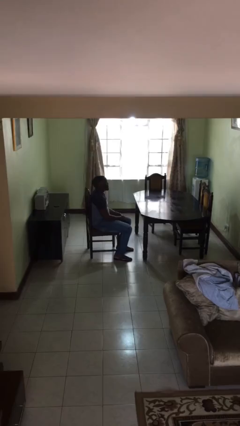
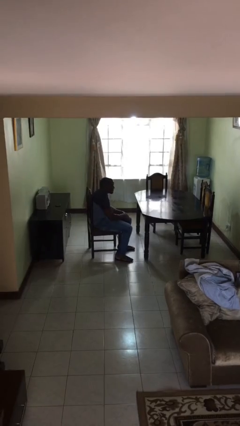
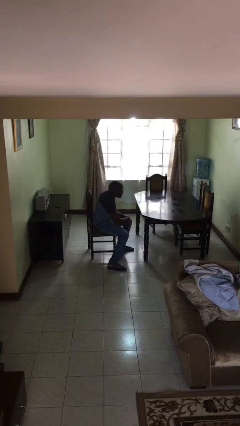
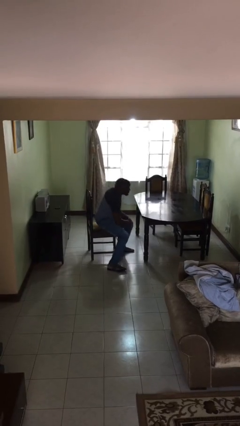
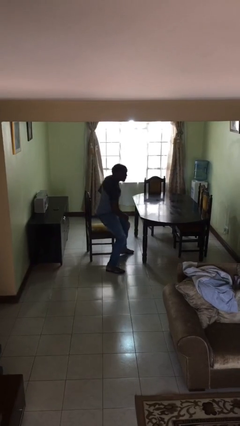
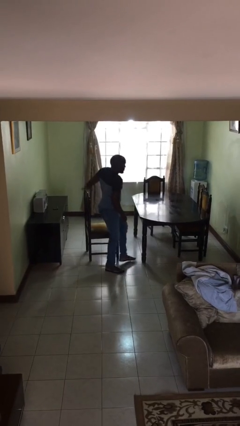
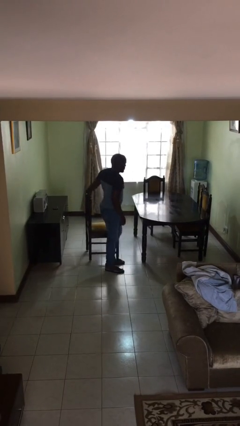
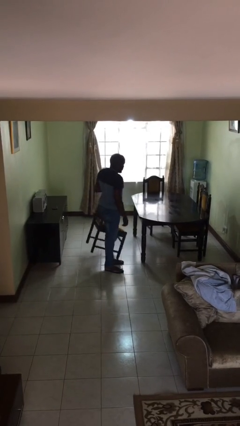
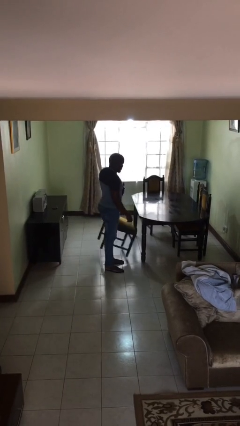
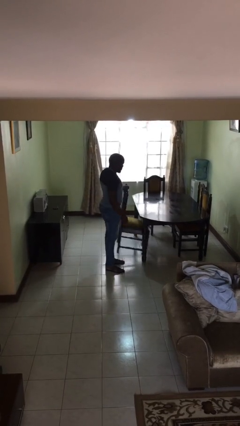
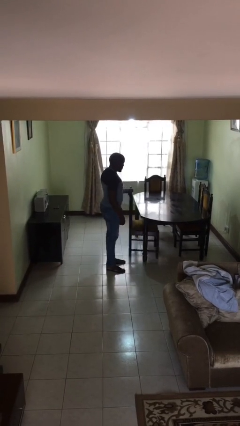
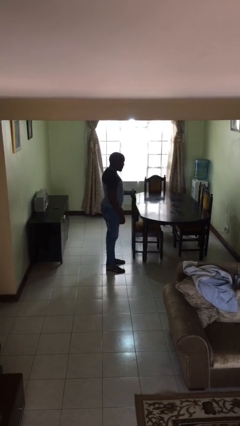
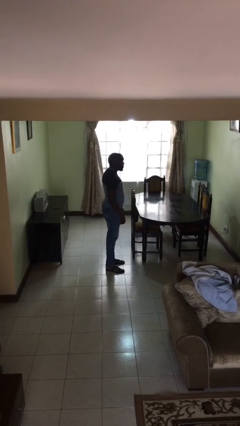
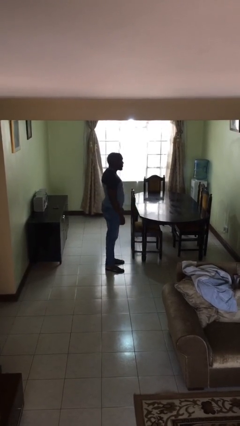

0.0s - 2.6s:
person stands up

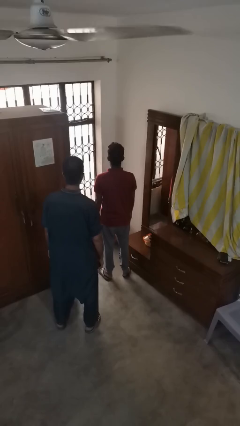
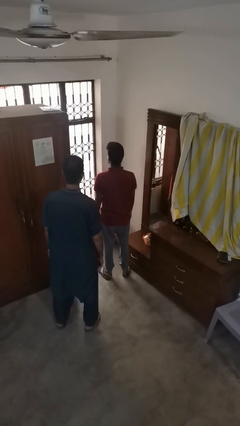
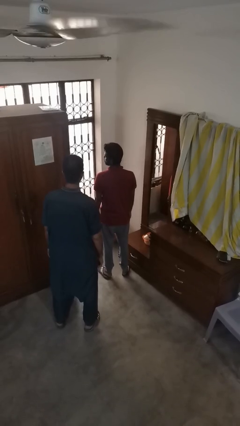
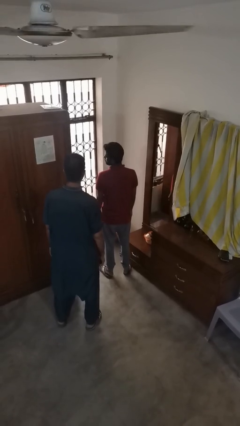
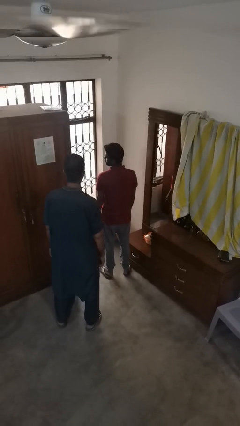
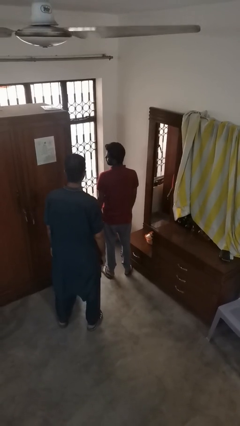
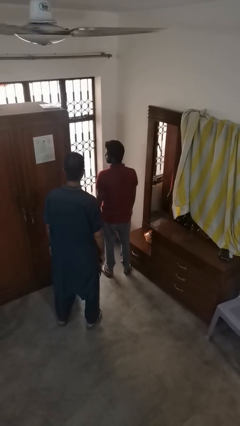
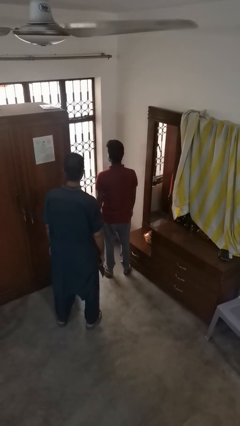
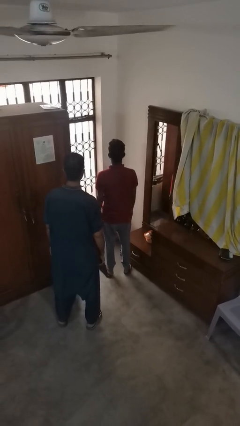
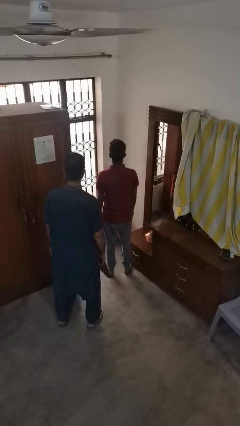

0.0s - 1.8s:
person looks over shoulder

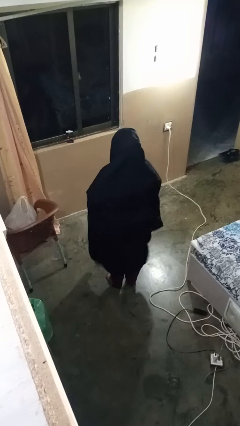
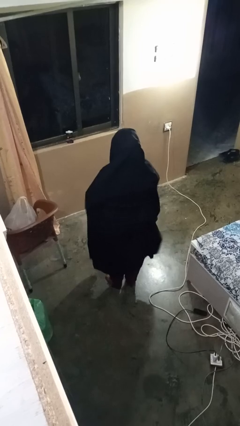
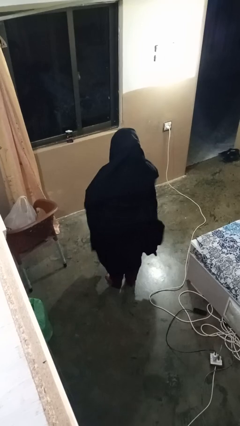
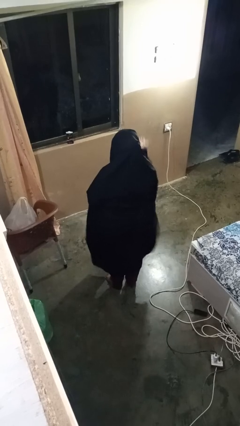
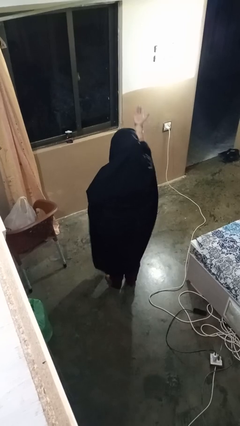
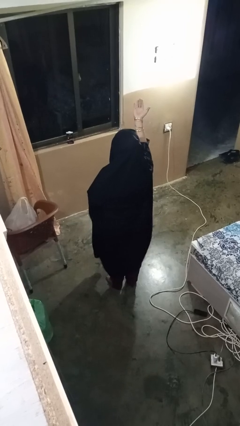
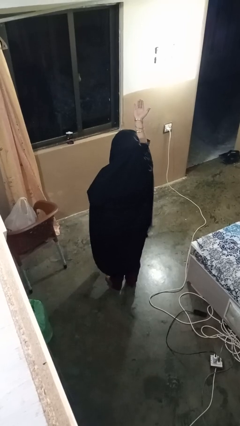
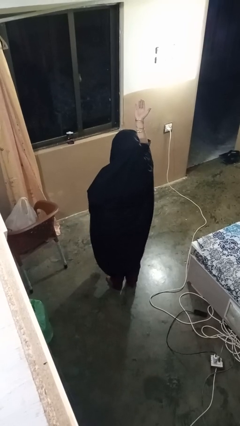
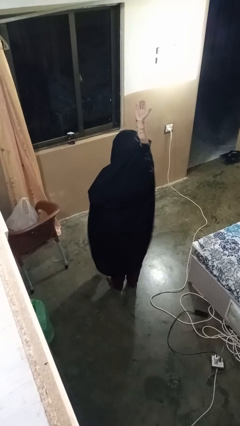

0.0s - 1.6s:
person gestures swipe up

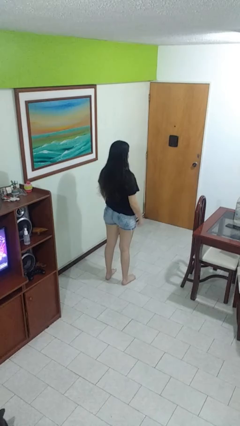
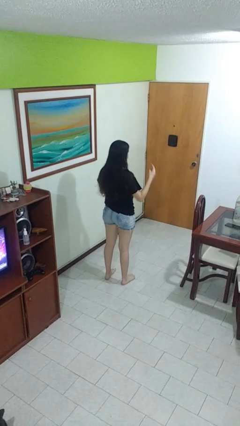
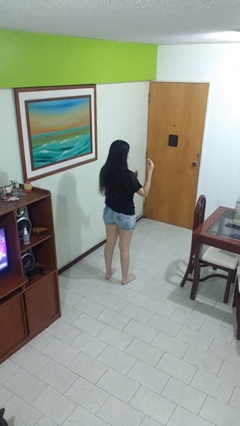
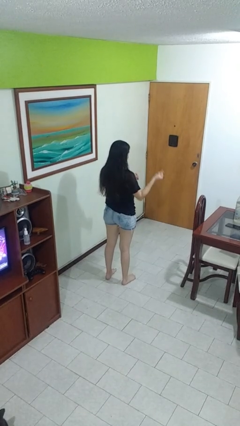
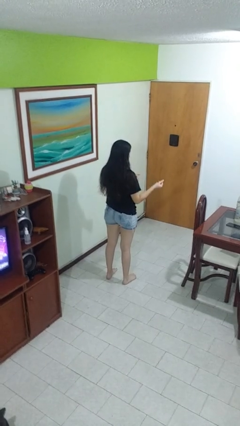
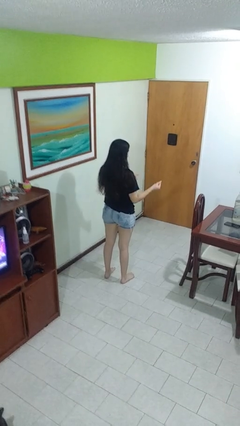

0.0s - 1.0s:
person snaps fingers

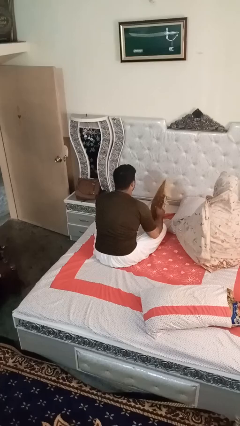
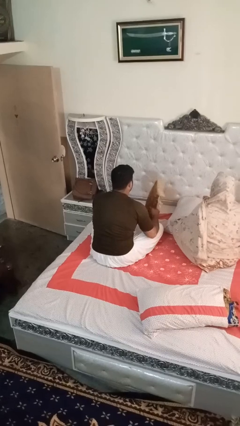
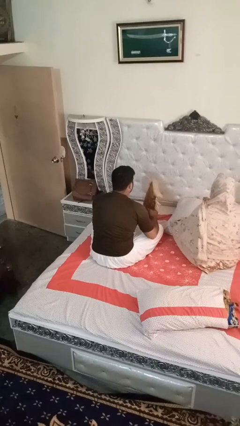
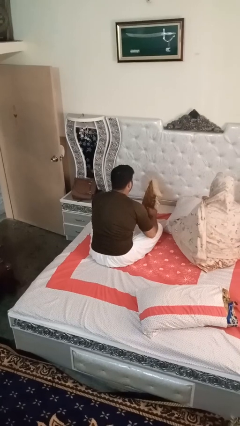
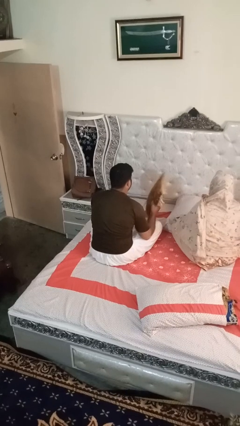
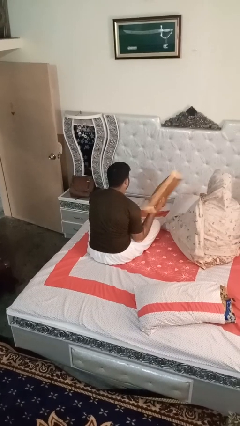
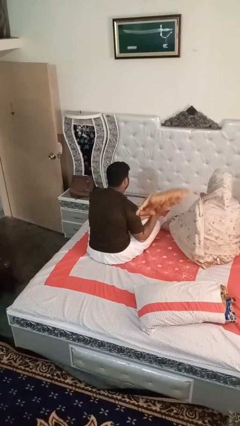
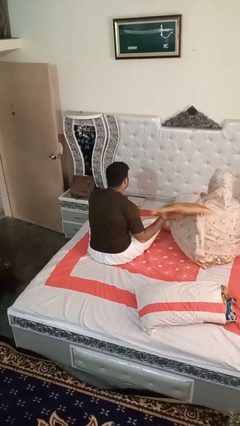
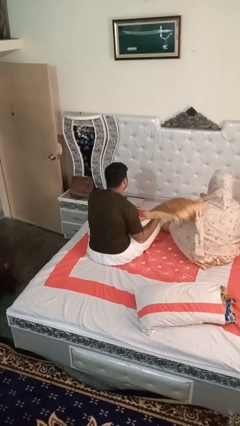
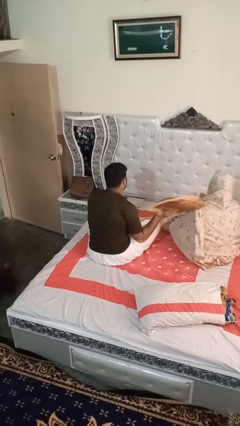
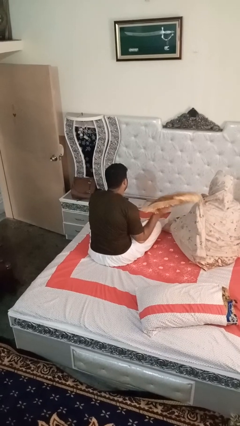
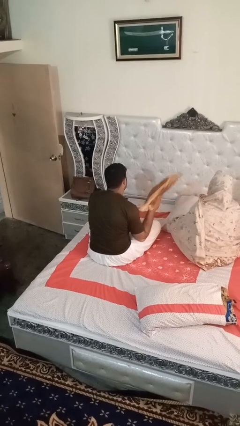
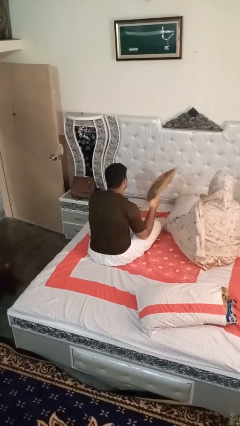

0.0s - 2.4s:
person hits person with pillow

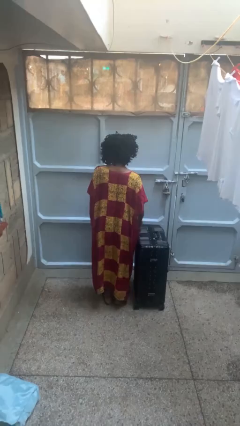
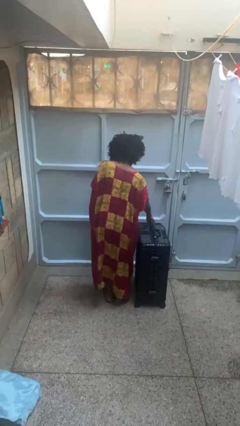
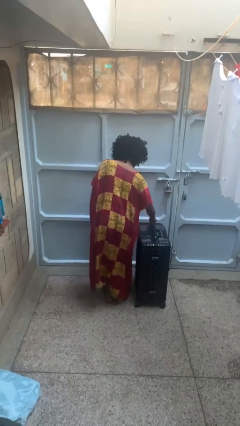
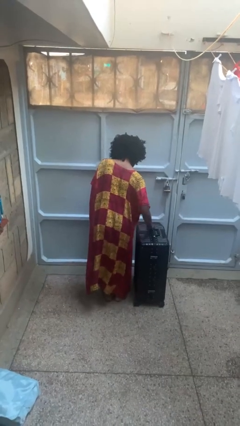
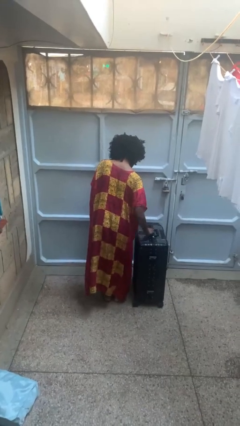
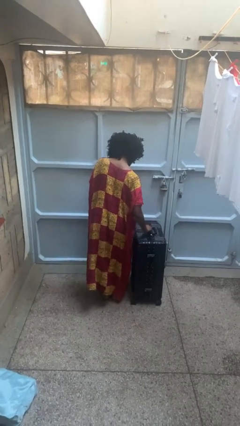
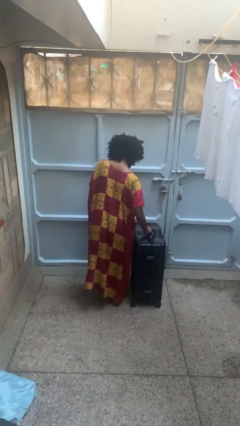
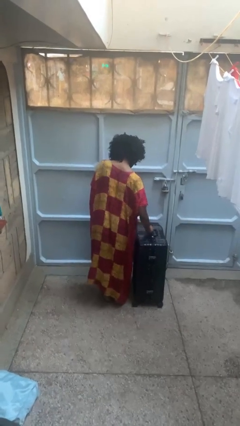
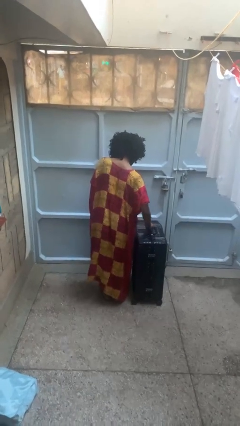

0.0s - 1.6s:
person opens suitcase

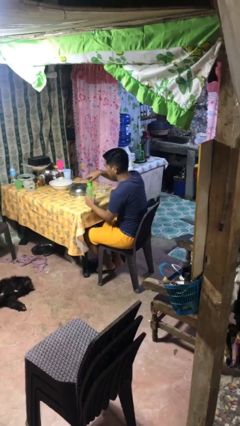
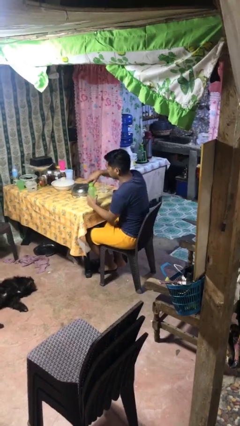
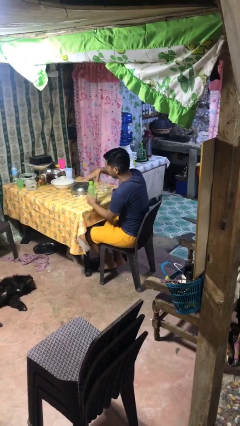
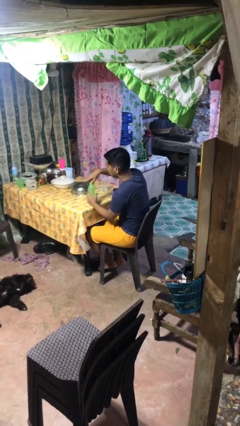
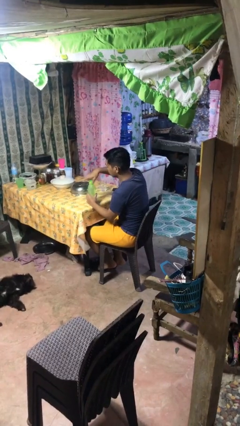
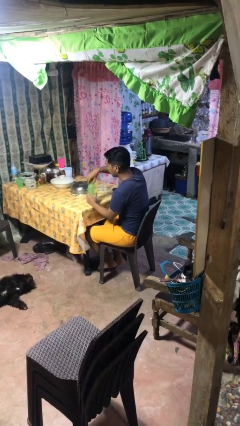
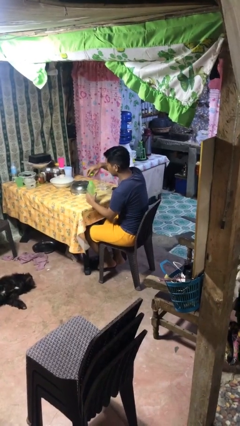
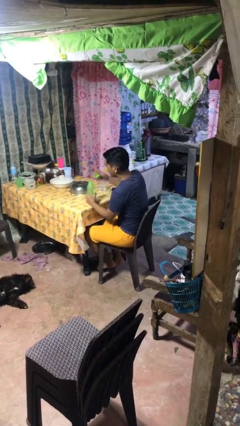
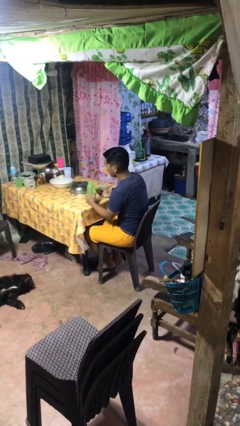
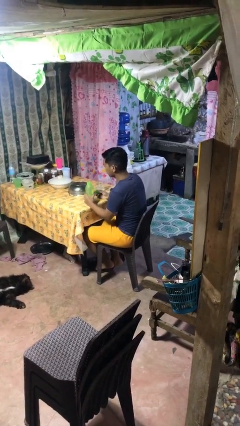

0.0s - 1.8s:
person unscrews lid from bottle

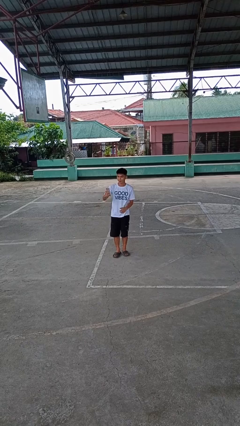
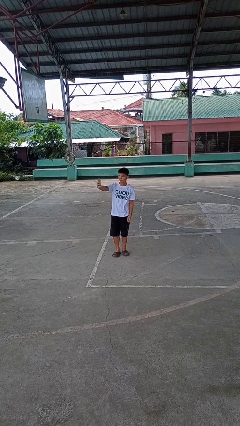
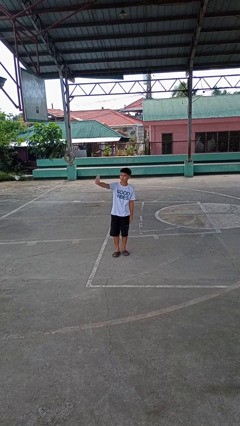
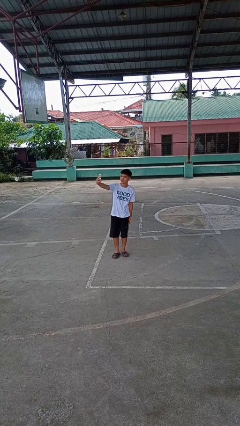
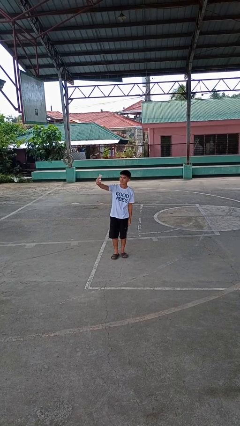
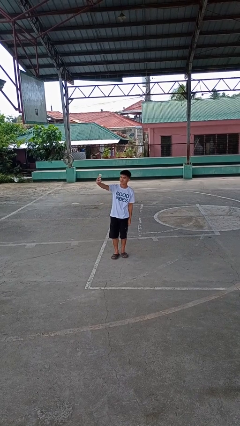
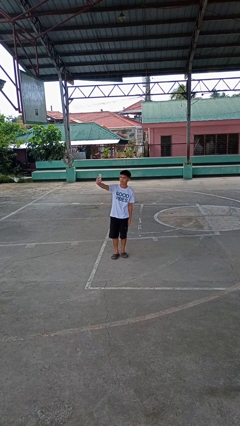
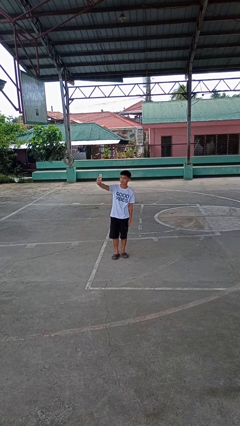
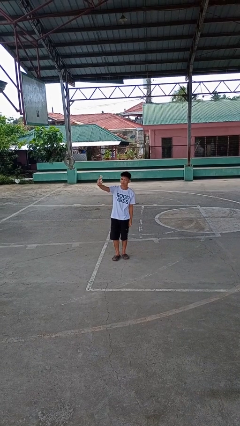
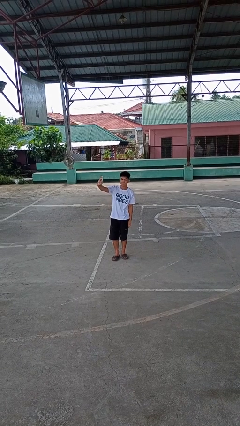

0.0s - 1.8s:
person takes selfie

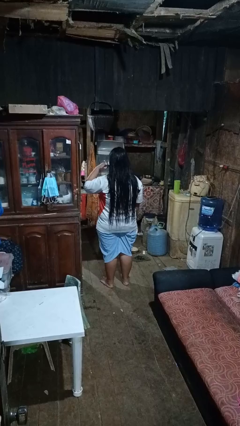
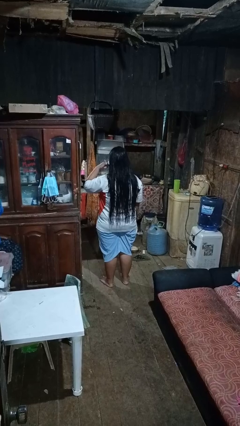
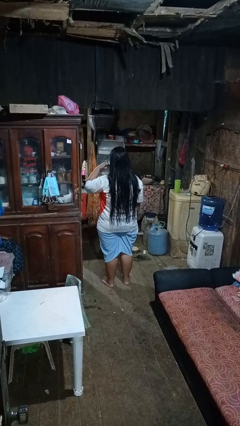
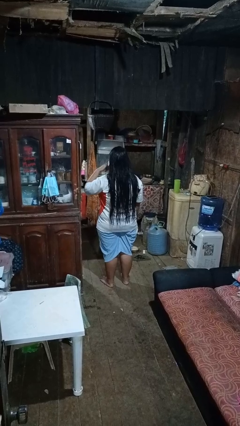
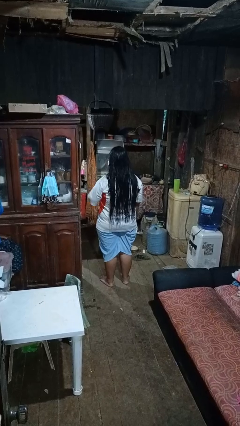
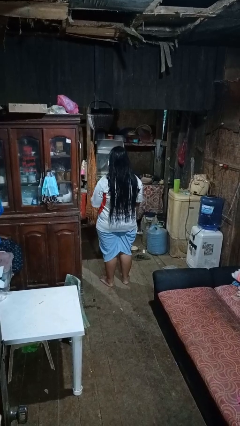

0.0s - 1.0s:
person gestures call me

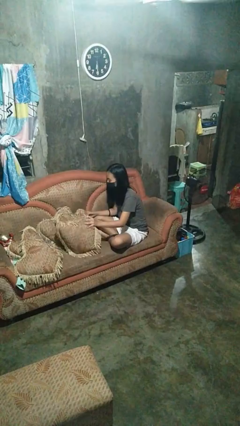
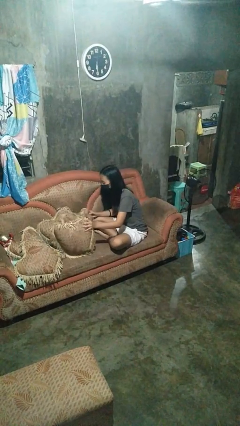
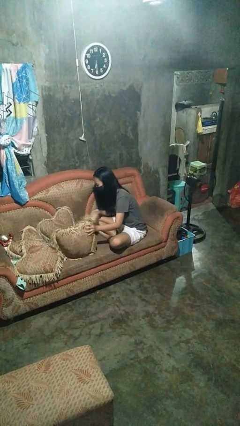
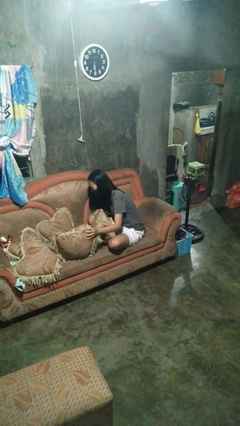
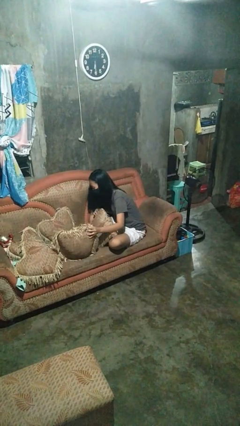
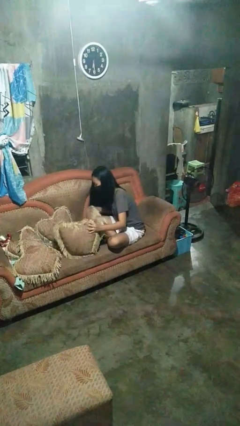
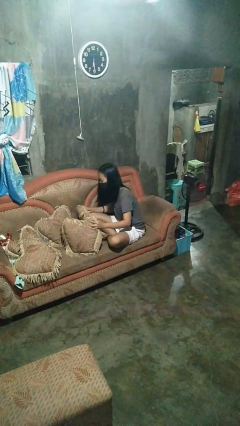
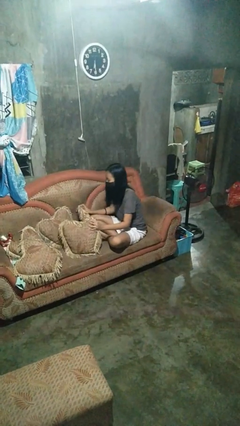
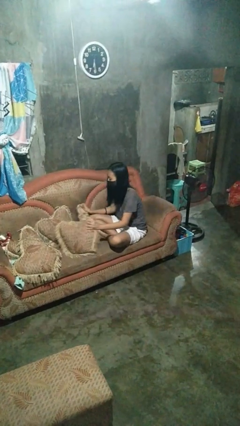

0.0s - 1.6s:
person searches in couch
